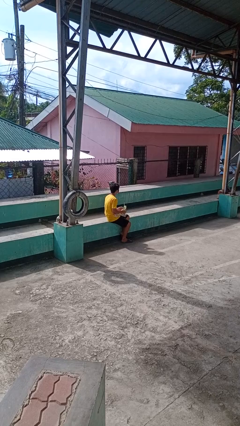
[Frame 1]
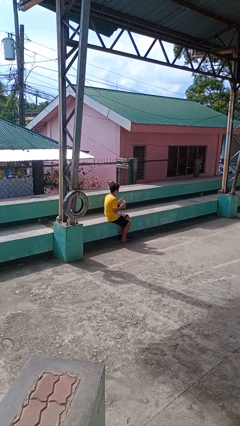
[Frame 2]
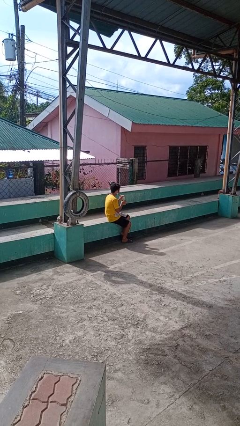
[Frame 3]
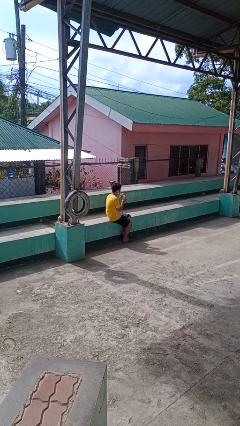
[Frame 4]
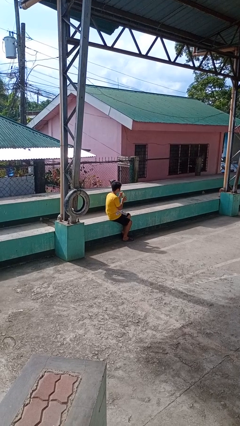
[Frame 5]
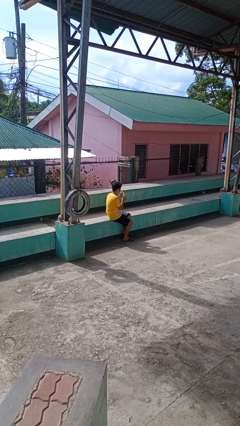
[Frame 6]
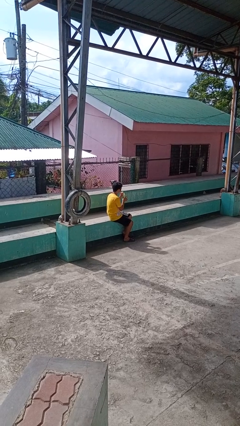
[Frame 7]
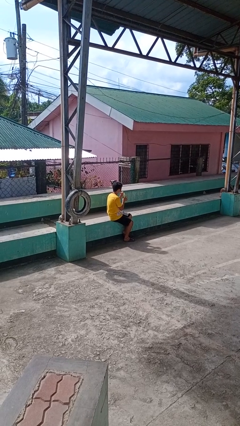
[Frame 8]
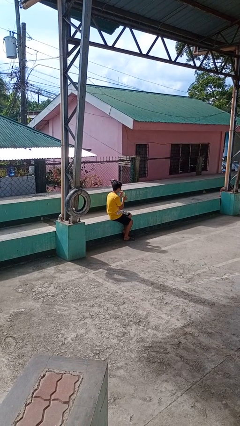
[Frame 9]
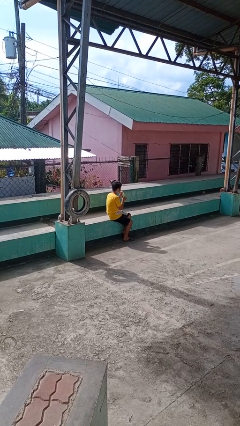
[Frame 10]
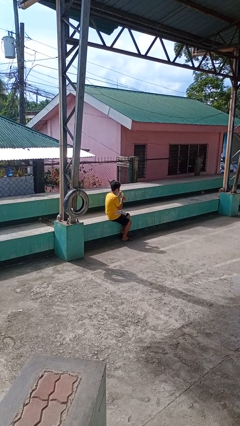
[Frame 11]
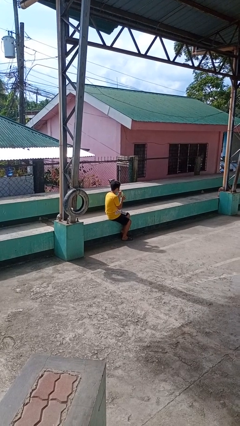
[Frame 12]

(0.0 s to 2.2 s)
person drinks from straw

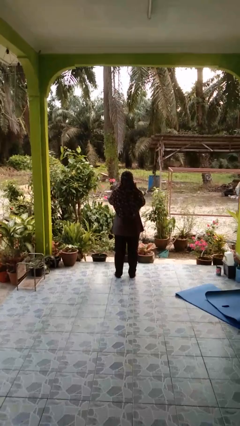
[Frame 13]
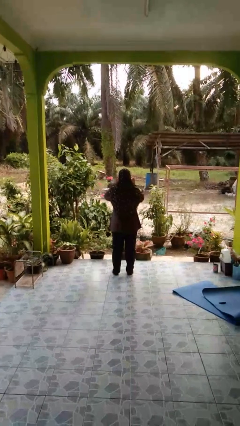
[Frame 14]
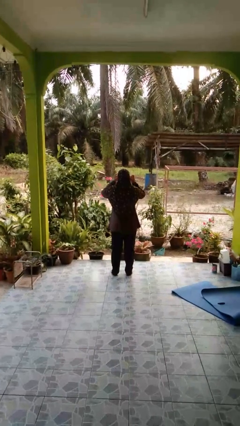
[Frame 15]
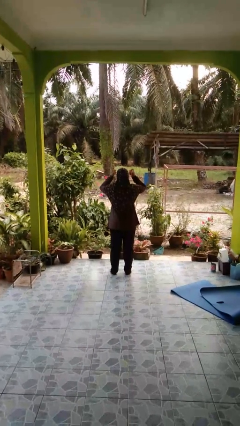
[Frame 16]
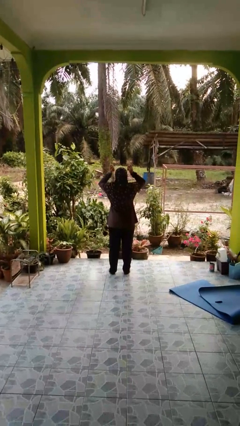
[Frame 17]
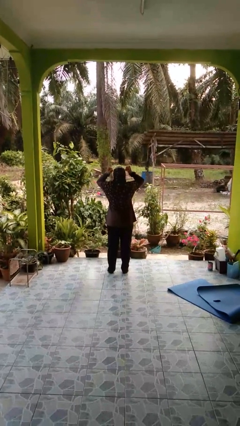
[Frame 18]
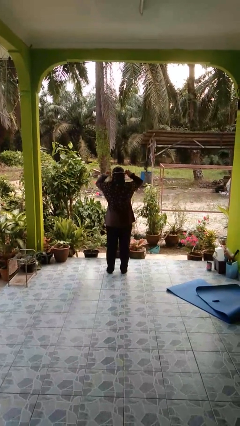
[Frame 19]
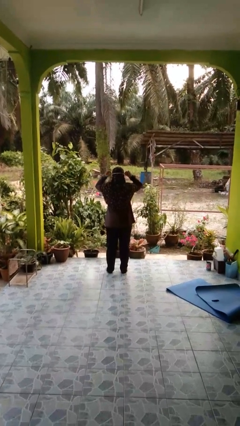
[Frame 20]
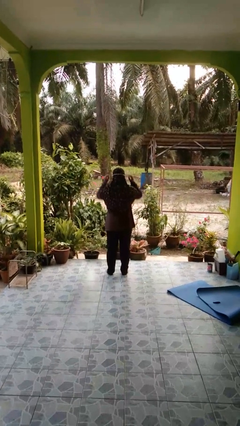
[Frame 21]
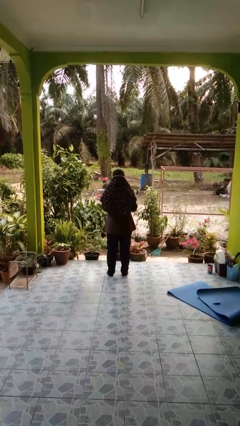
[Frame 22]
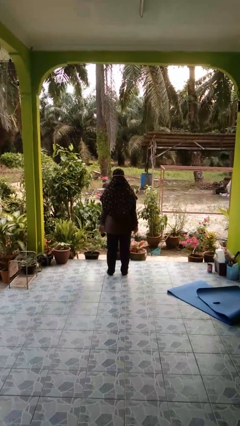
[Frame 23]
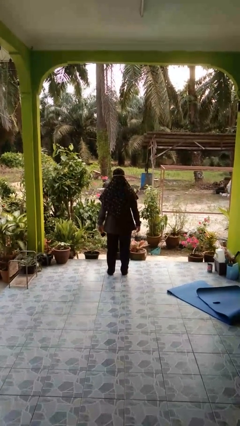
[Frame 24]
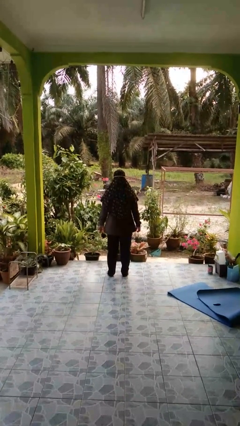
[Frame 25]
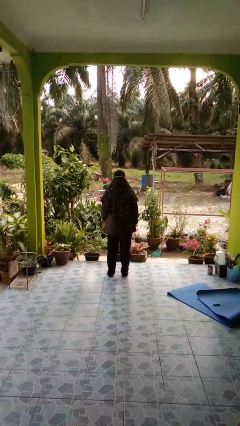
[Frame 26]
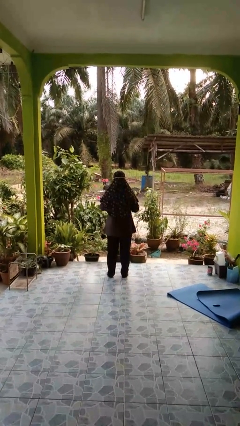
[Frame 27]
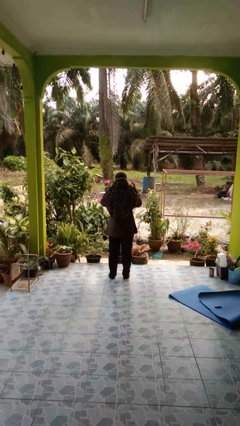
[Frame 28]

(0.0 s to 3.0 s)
person puts on facemask

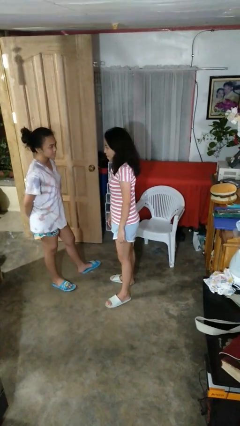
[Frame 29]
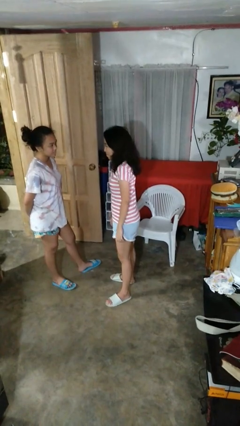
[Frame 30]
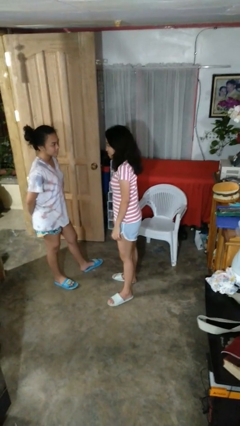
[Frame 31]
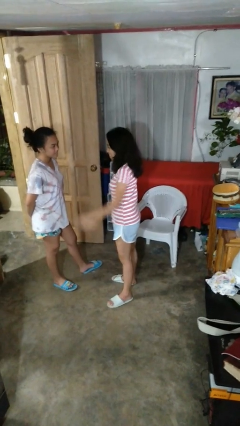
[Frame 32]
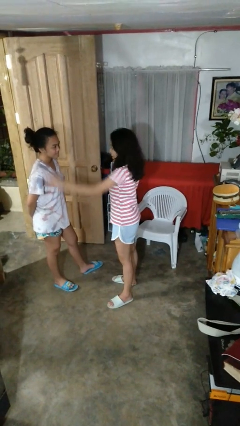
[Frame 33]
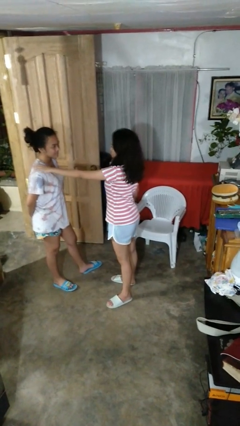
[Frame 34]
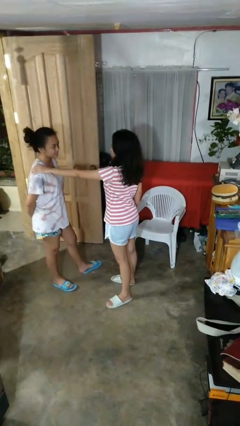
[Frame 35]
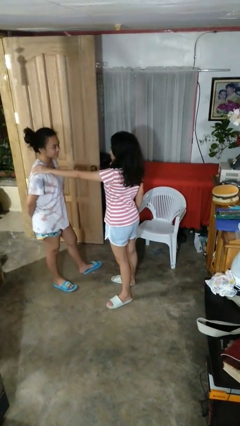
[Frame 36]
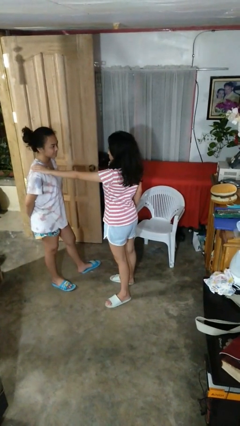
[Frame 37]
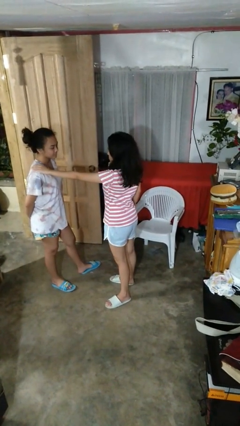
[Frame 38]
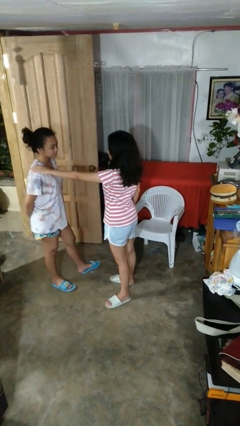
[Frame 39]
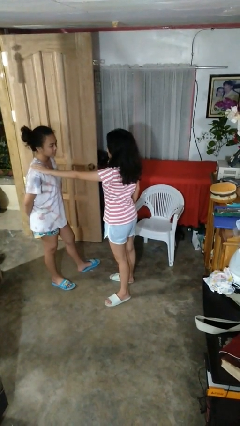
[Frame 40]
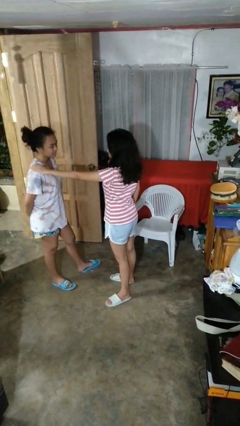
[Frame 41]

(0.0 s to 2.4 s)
person pounds shoulders of person

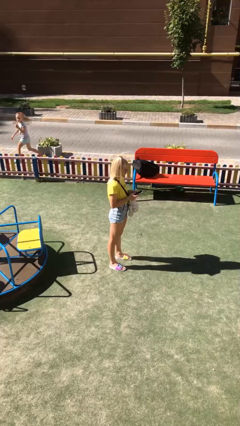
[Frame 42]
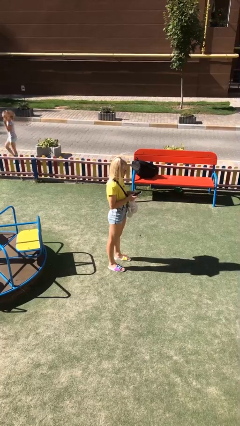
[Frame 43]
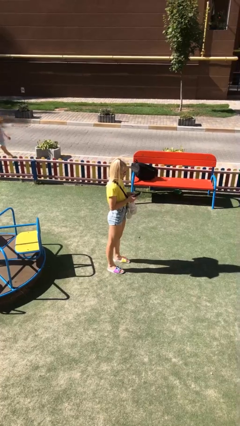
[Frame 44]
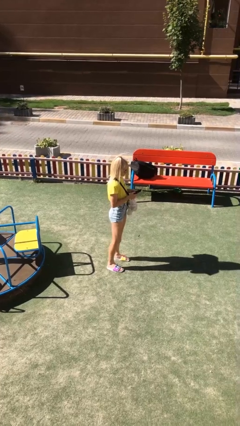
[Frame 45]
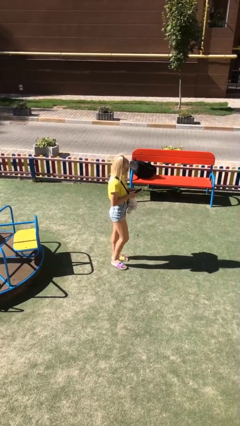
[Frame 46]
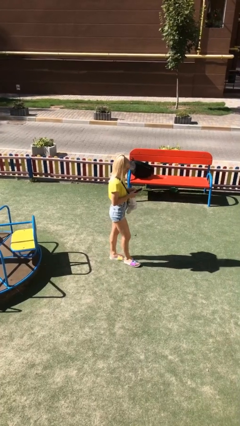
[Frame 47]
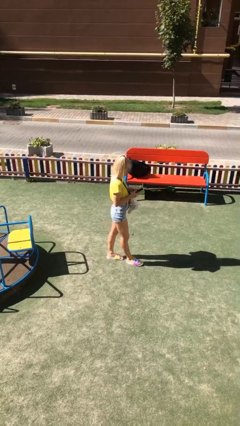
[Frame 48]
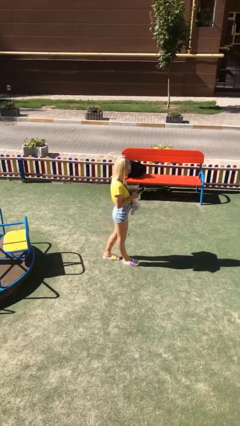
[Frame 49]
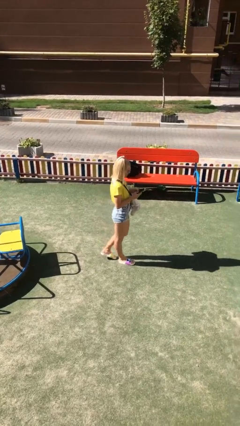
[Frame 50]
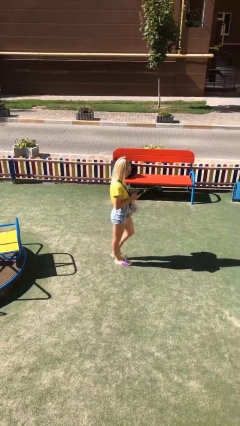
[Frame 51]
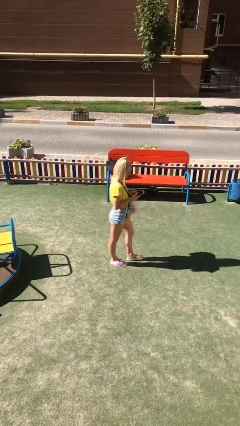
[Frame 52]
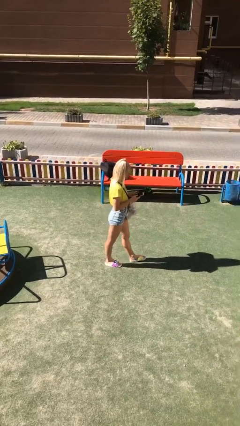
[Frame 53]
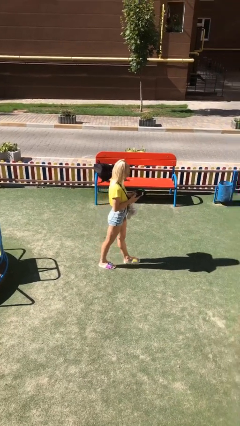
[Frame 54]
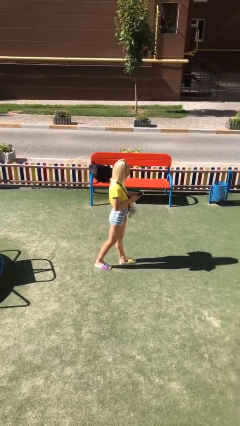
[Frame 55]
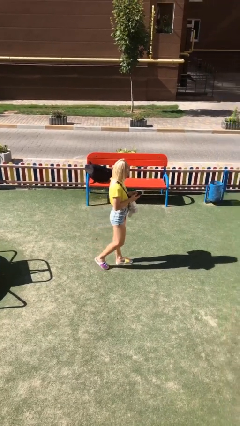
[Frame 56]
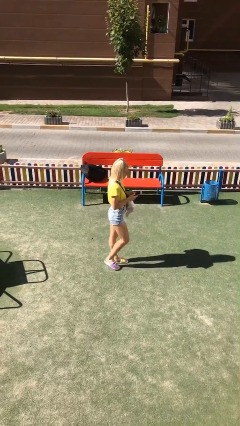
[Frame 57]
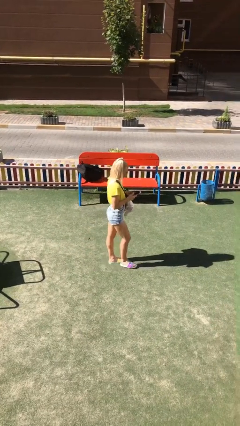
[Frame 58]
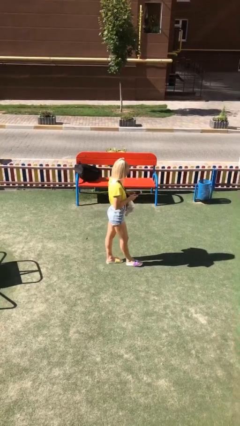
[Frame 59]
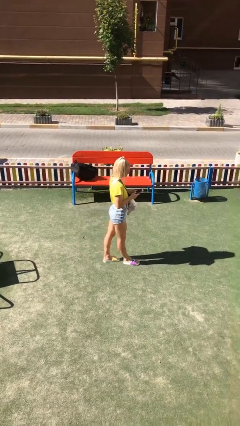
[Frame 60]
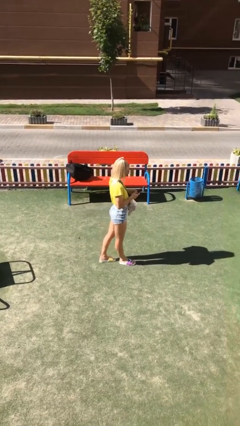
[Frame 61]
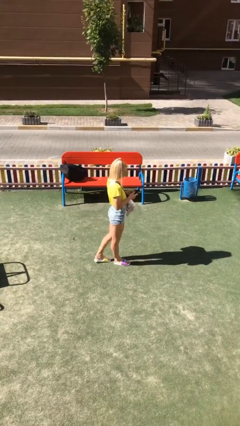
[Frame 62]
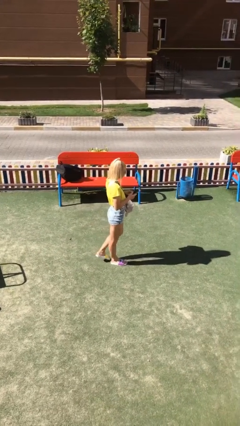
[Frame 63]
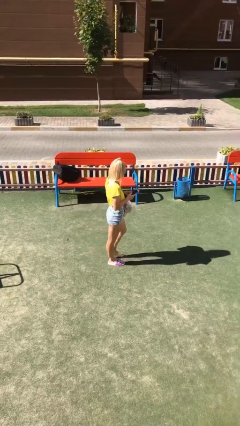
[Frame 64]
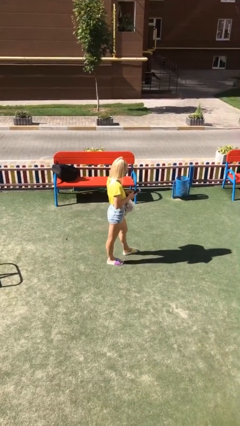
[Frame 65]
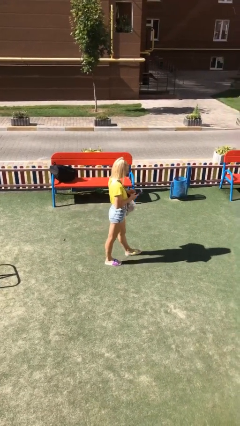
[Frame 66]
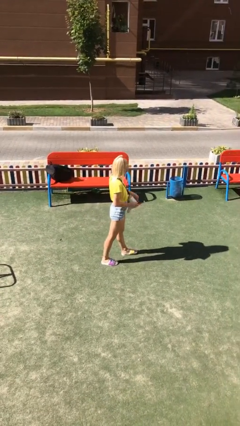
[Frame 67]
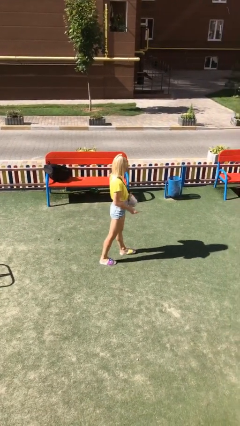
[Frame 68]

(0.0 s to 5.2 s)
person texts on phone

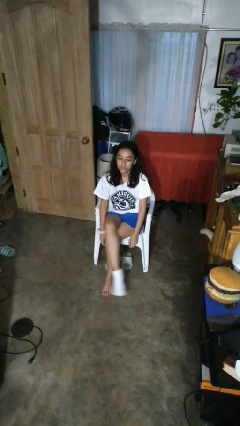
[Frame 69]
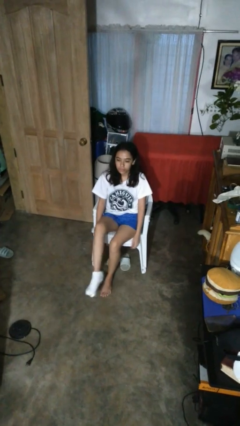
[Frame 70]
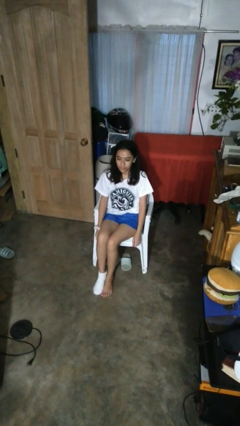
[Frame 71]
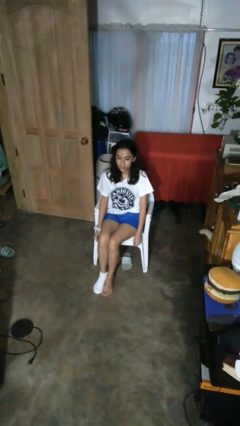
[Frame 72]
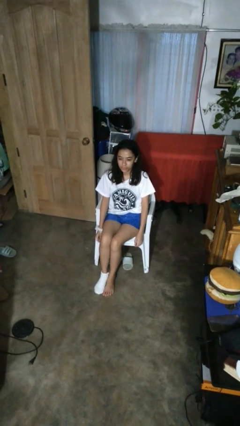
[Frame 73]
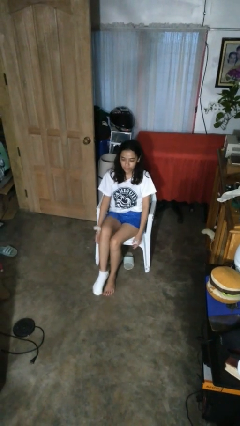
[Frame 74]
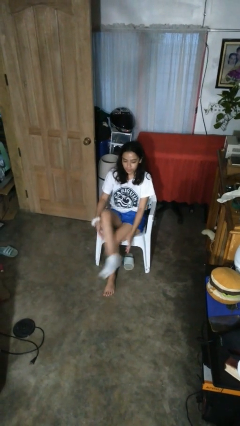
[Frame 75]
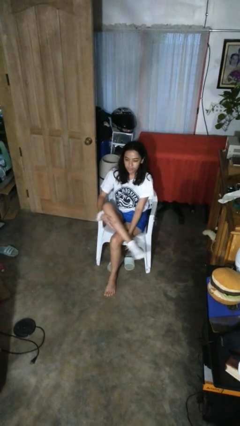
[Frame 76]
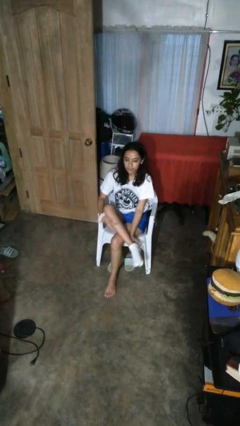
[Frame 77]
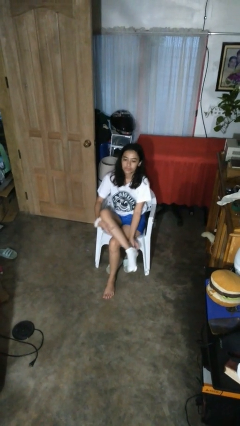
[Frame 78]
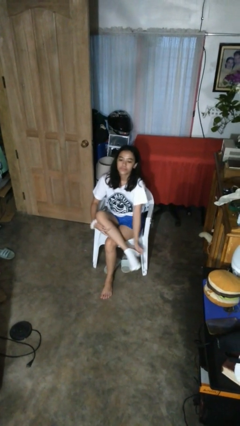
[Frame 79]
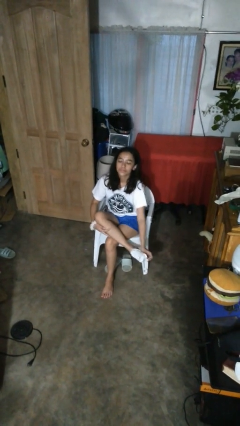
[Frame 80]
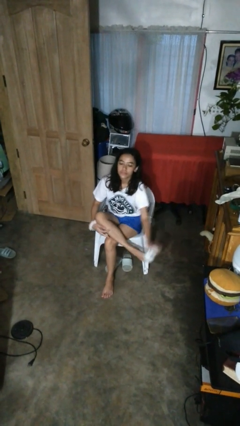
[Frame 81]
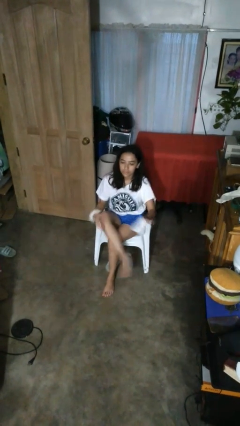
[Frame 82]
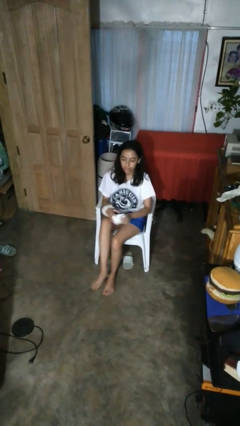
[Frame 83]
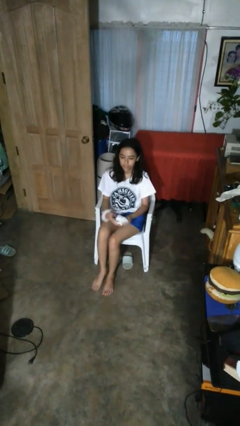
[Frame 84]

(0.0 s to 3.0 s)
person takes off socks

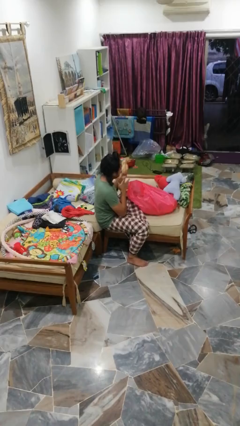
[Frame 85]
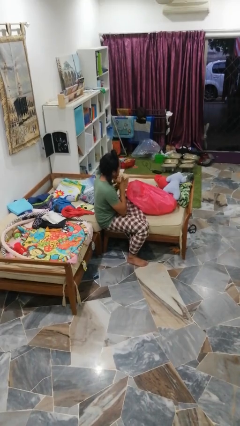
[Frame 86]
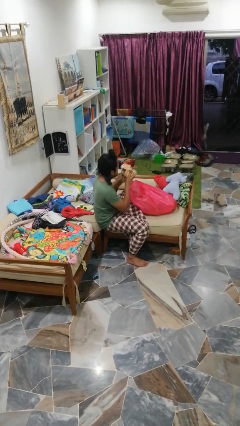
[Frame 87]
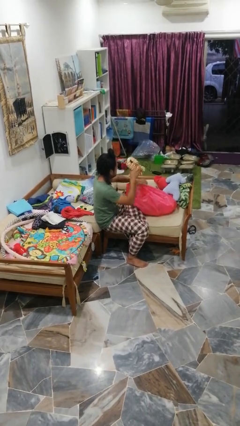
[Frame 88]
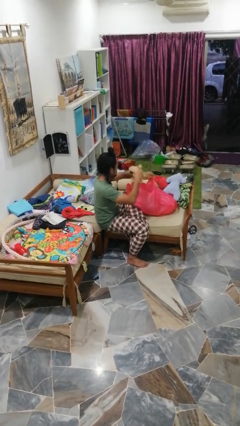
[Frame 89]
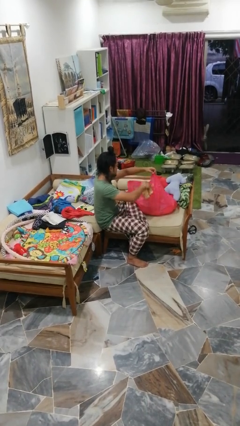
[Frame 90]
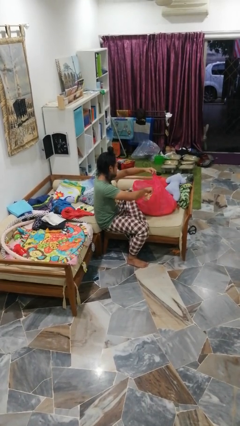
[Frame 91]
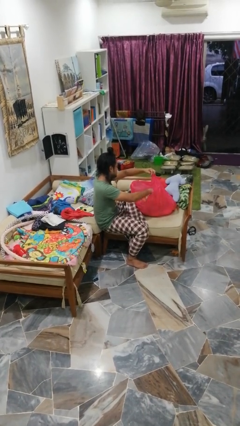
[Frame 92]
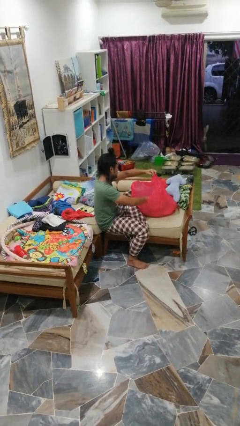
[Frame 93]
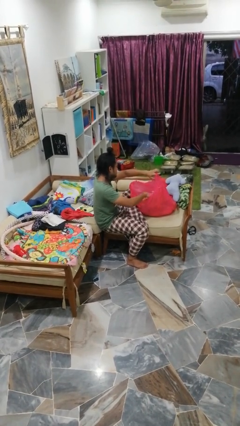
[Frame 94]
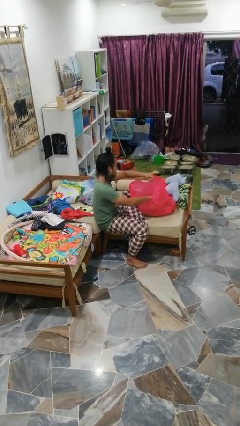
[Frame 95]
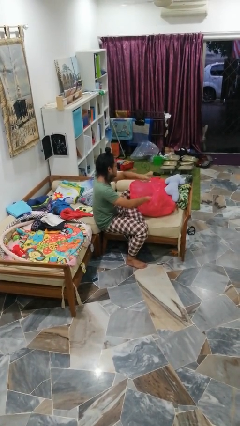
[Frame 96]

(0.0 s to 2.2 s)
person puts object into bag
